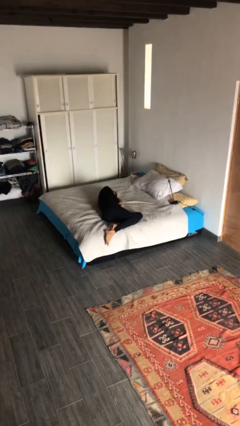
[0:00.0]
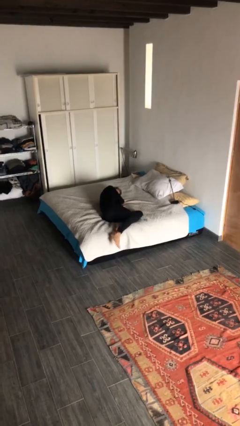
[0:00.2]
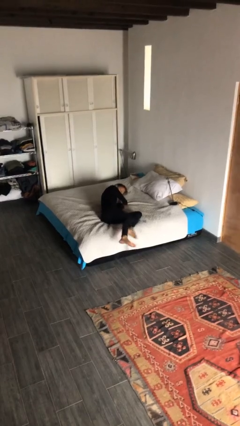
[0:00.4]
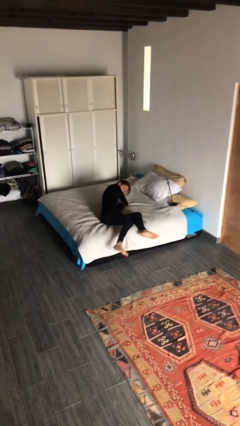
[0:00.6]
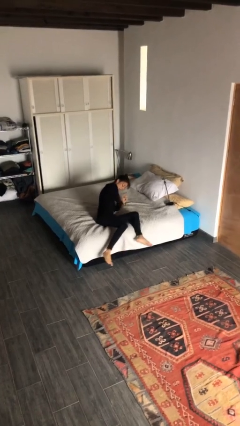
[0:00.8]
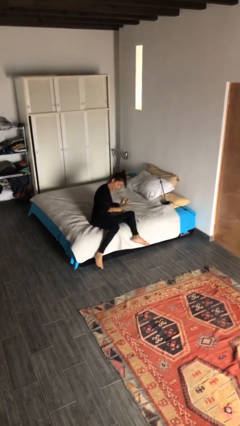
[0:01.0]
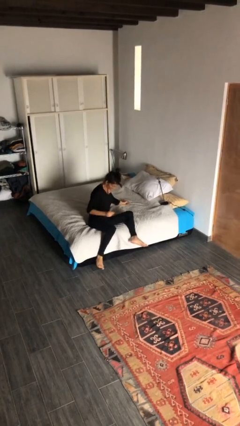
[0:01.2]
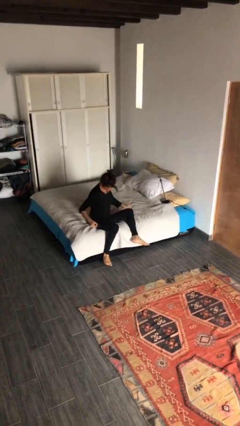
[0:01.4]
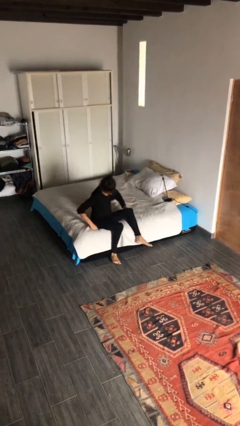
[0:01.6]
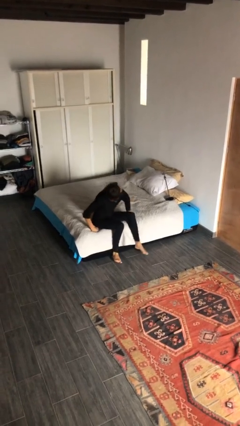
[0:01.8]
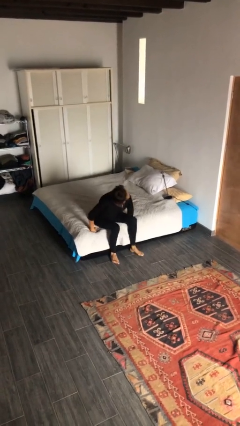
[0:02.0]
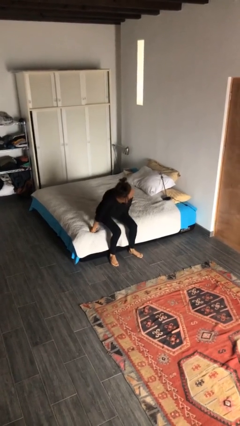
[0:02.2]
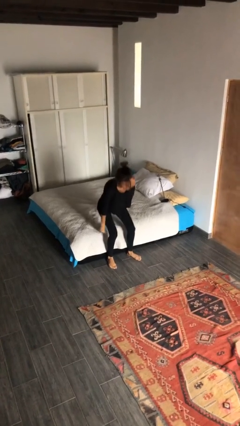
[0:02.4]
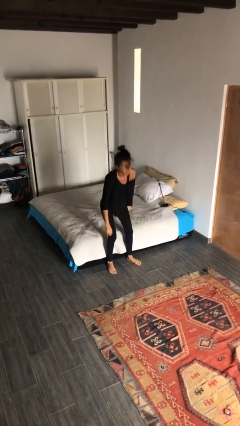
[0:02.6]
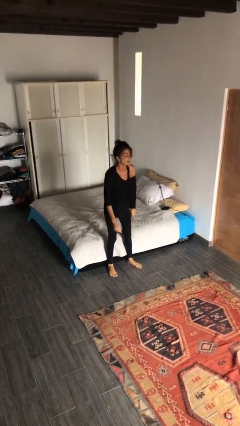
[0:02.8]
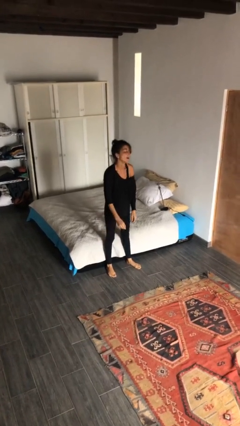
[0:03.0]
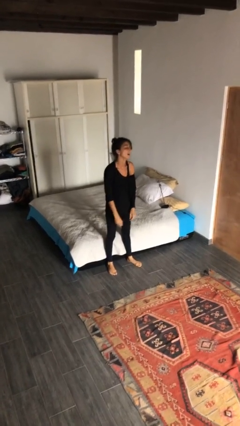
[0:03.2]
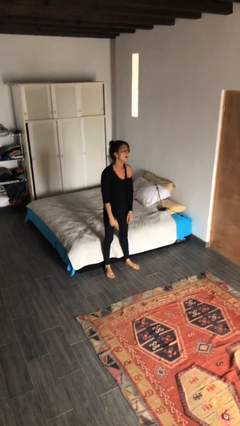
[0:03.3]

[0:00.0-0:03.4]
person stands up

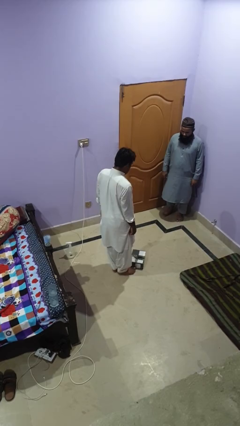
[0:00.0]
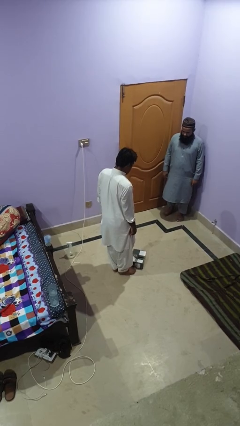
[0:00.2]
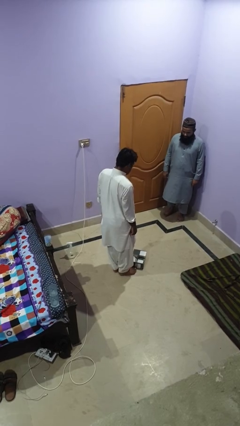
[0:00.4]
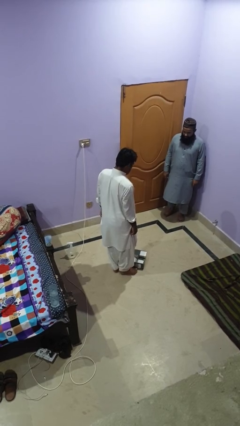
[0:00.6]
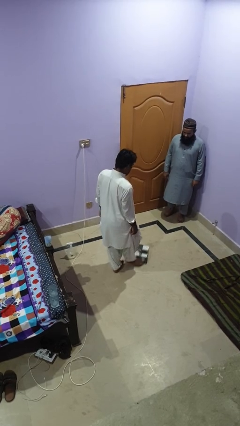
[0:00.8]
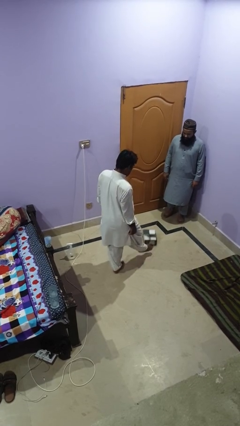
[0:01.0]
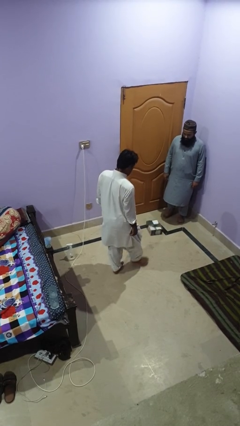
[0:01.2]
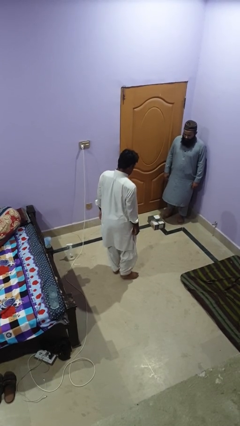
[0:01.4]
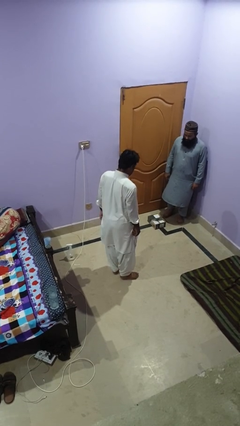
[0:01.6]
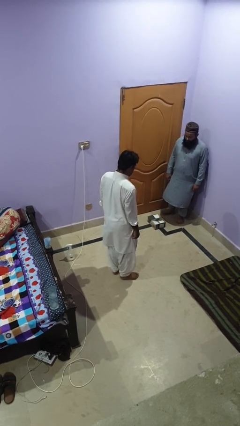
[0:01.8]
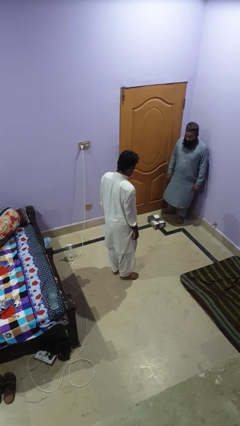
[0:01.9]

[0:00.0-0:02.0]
person kicks object to person

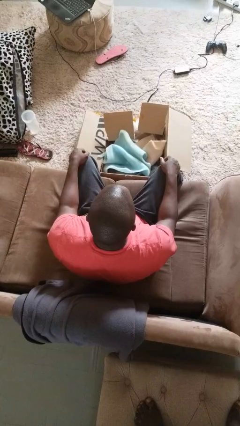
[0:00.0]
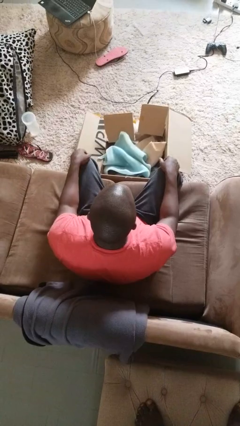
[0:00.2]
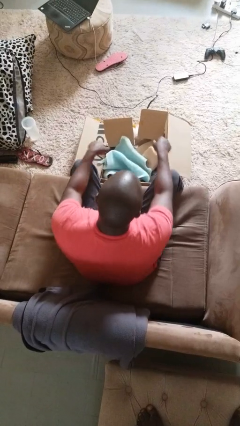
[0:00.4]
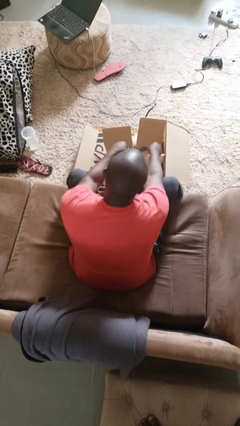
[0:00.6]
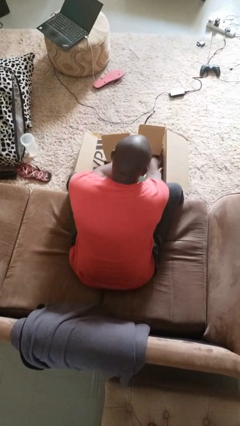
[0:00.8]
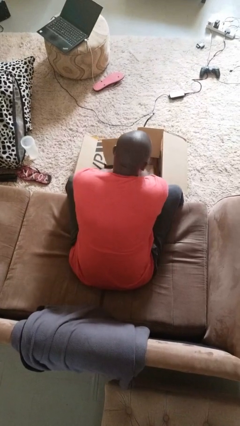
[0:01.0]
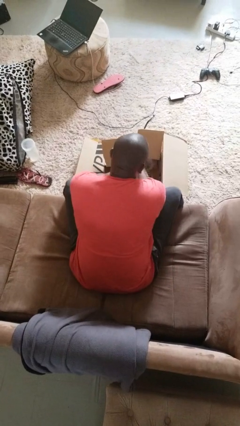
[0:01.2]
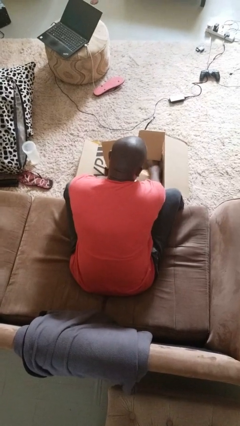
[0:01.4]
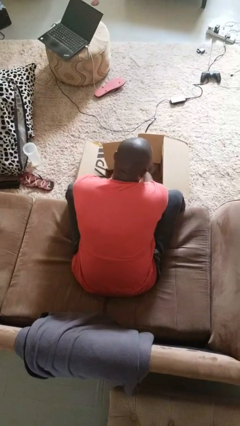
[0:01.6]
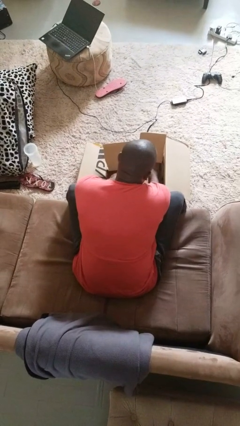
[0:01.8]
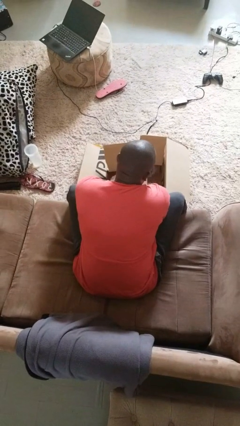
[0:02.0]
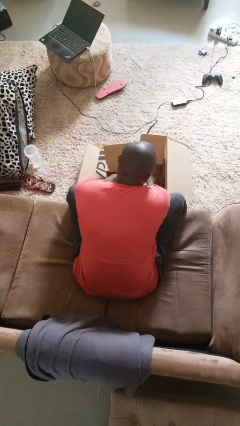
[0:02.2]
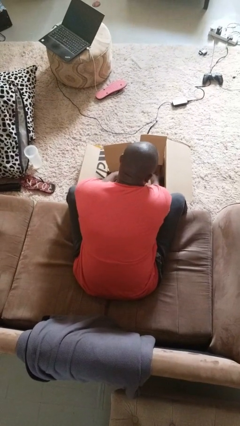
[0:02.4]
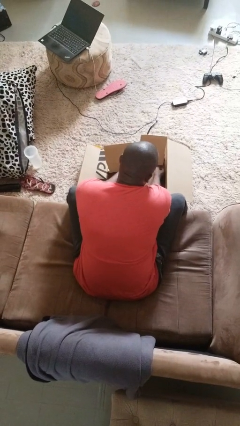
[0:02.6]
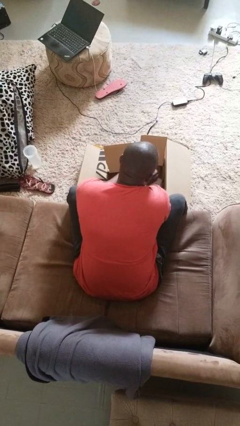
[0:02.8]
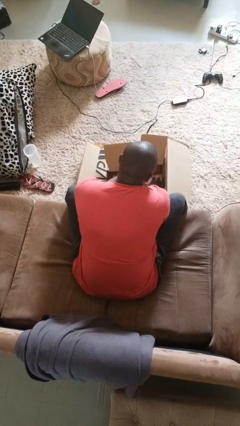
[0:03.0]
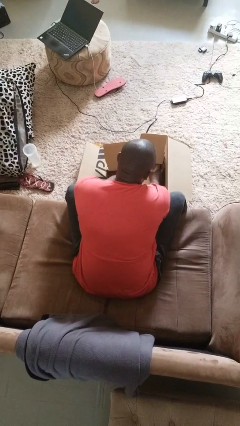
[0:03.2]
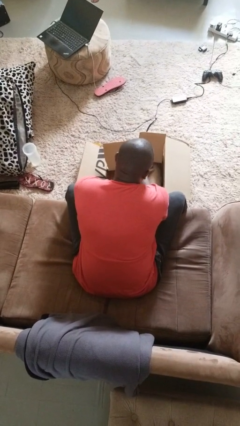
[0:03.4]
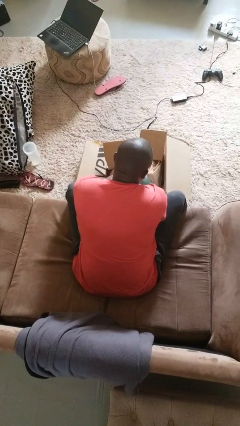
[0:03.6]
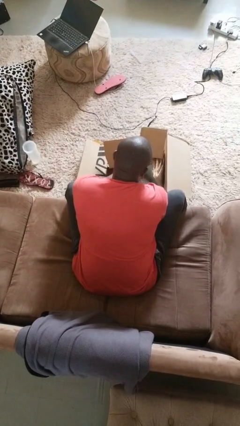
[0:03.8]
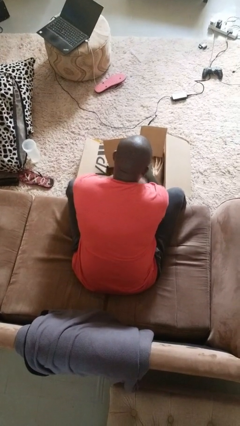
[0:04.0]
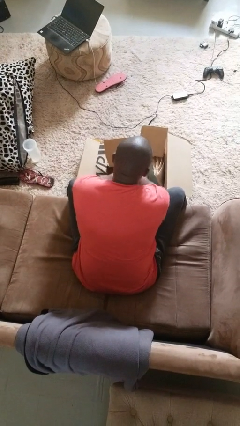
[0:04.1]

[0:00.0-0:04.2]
person searches in box

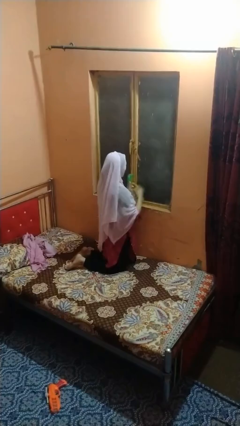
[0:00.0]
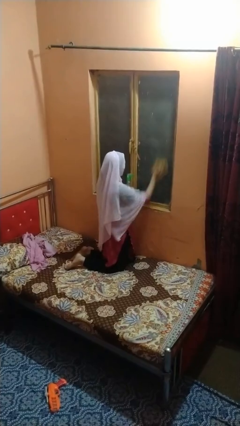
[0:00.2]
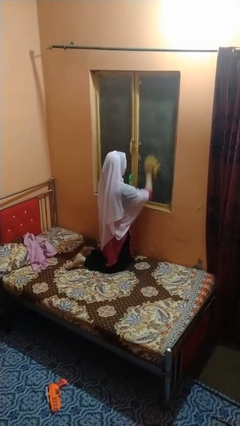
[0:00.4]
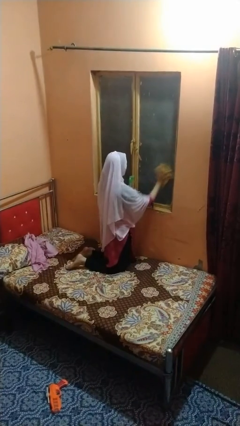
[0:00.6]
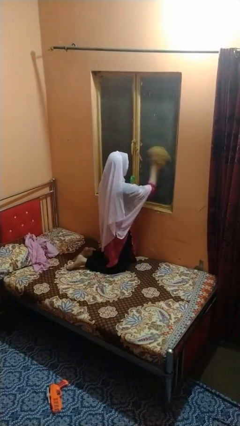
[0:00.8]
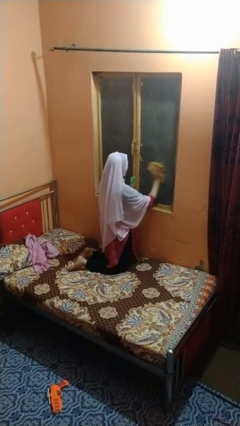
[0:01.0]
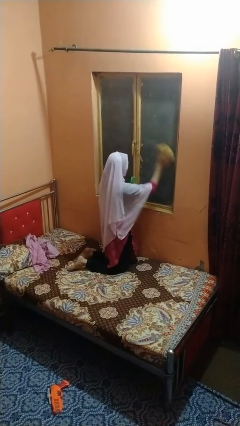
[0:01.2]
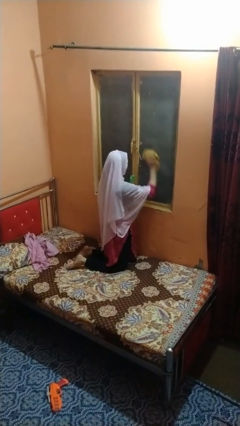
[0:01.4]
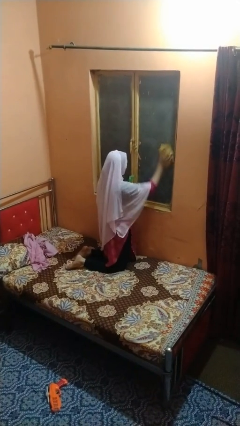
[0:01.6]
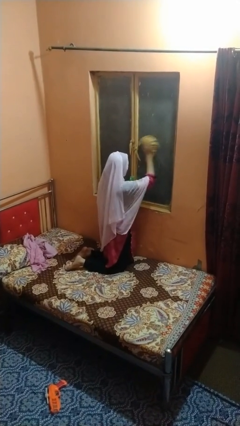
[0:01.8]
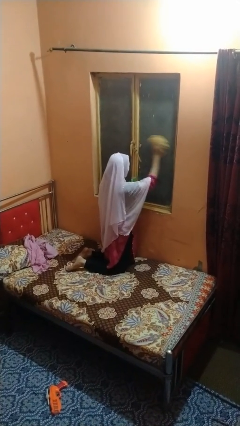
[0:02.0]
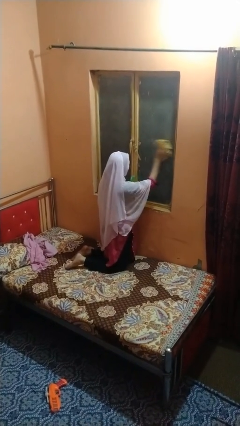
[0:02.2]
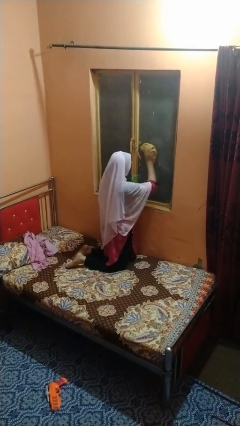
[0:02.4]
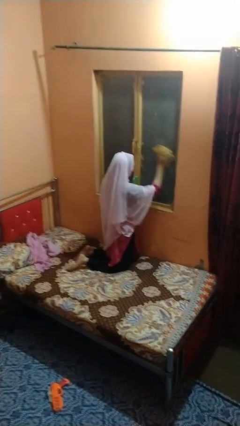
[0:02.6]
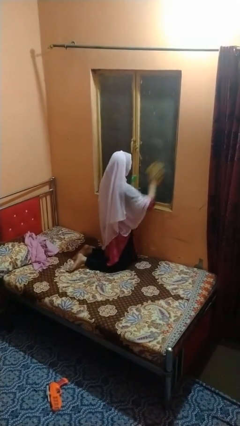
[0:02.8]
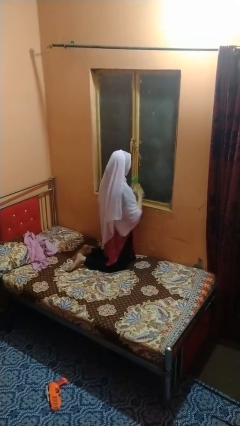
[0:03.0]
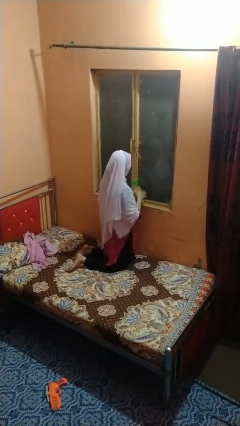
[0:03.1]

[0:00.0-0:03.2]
person washes window

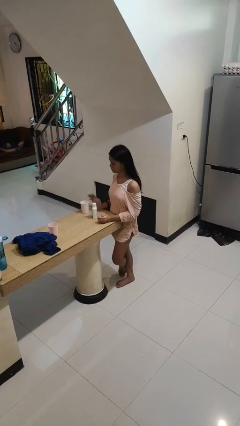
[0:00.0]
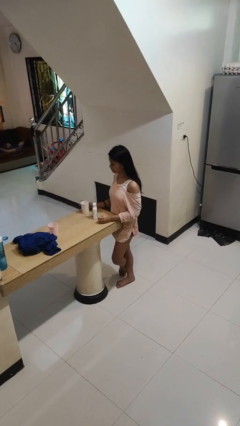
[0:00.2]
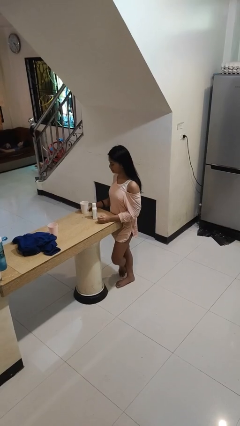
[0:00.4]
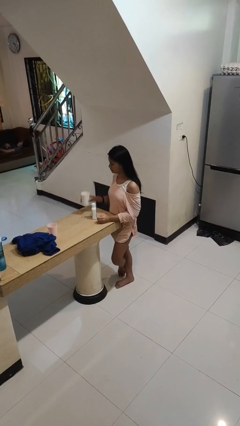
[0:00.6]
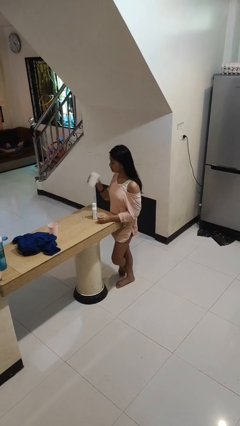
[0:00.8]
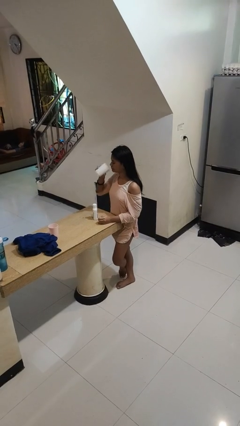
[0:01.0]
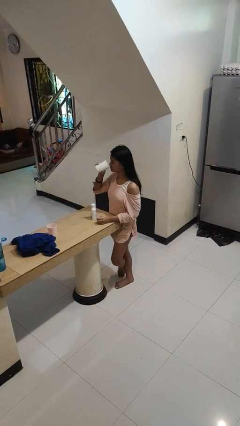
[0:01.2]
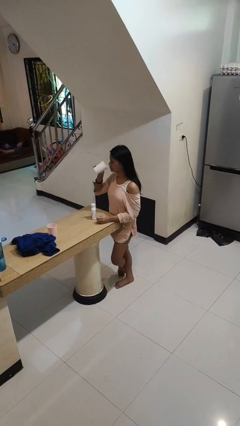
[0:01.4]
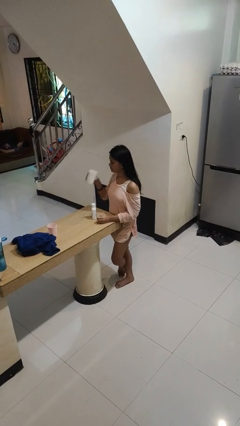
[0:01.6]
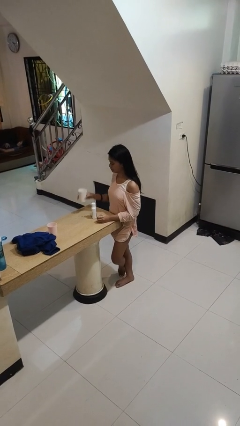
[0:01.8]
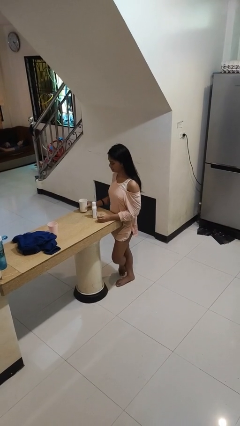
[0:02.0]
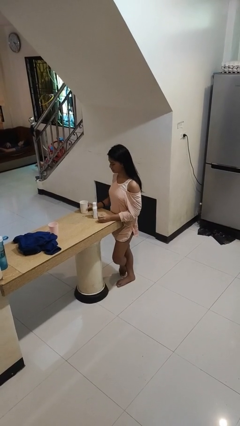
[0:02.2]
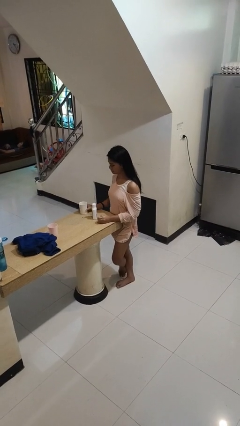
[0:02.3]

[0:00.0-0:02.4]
person drinks from cup

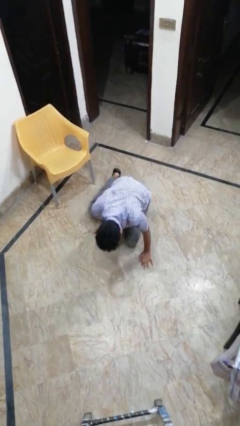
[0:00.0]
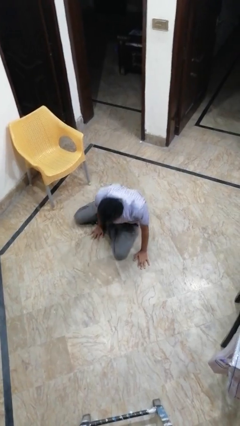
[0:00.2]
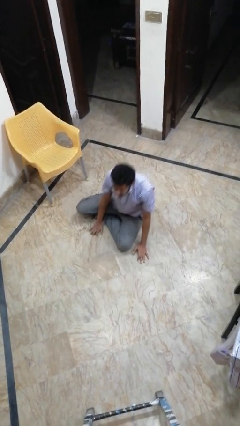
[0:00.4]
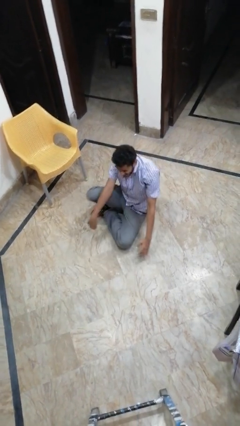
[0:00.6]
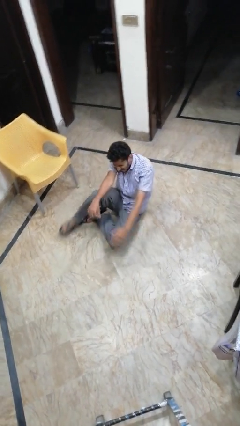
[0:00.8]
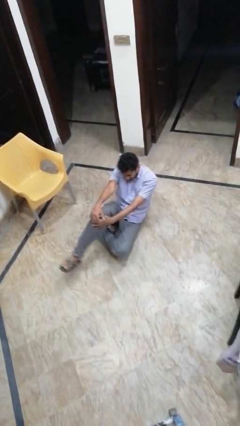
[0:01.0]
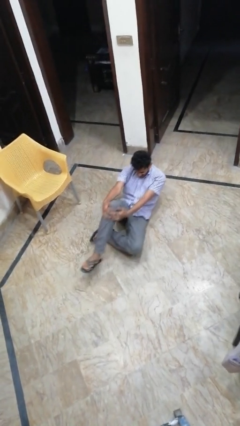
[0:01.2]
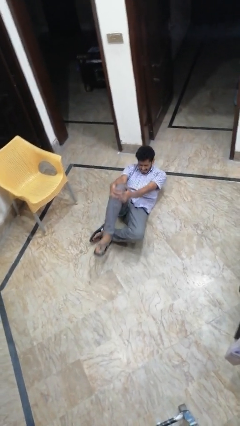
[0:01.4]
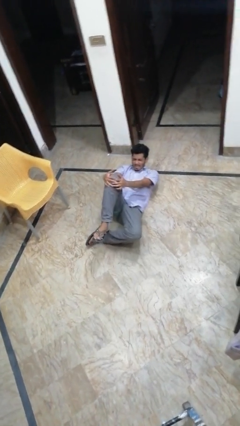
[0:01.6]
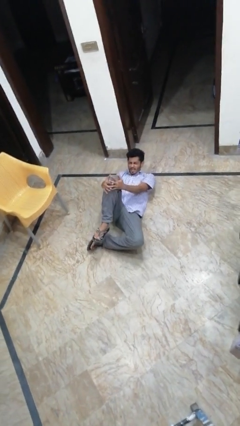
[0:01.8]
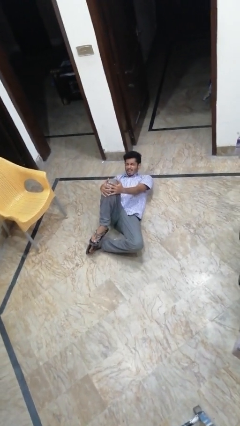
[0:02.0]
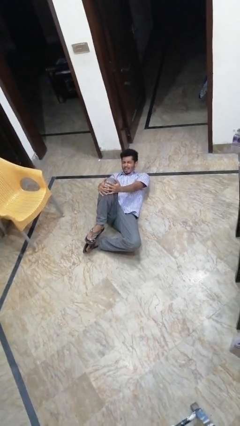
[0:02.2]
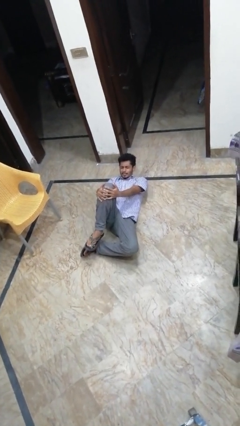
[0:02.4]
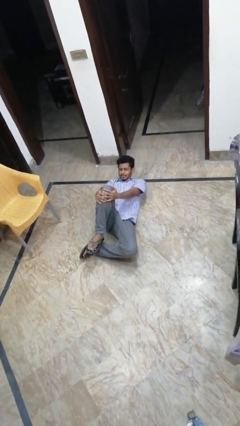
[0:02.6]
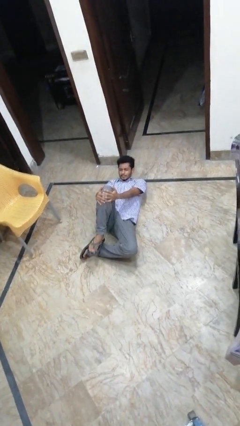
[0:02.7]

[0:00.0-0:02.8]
person lies down on floor
